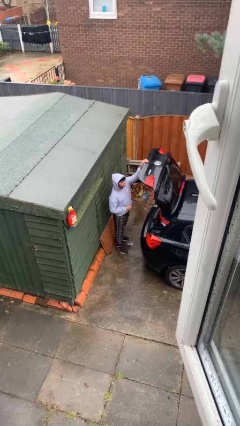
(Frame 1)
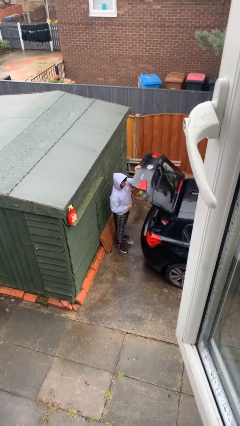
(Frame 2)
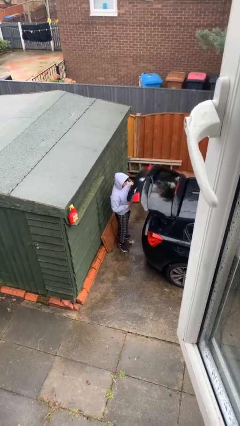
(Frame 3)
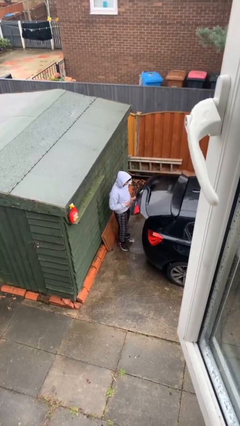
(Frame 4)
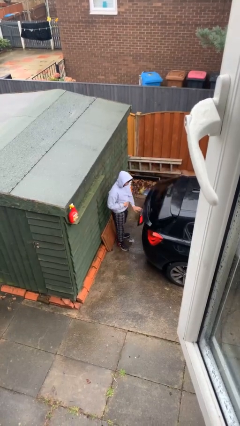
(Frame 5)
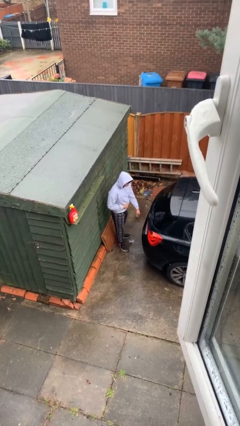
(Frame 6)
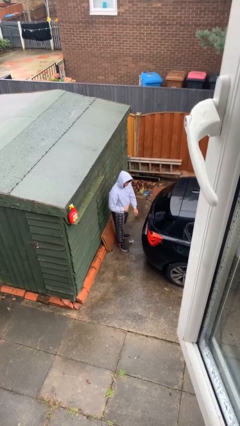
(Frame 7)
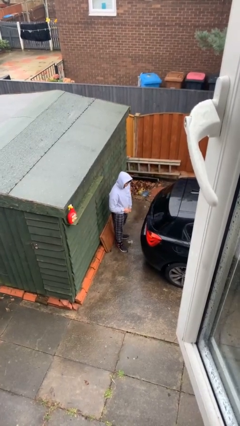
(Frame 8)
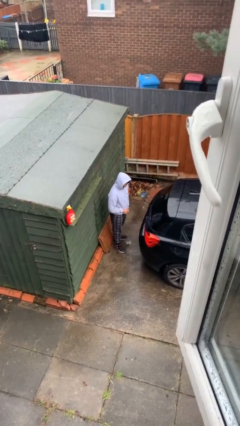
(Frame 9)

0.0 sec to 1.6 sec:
person closes car trunk

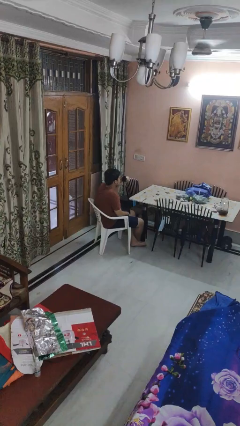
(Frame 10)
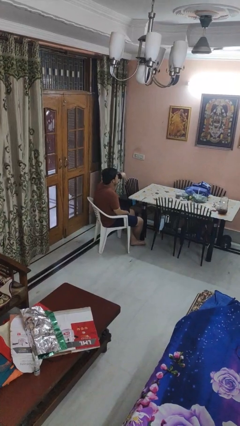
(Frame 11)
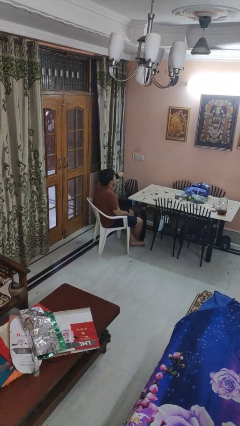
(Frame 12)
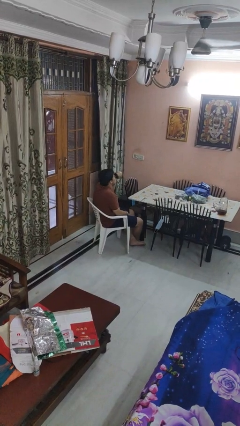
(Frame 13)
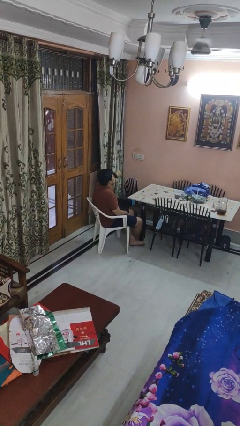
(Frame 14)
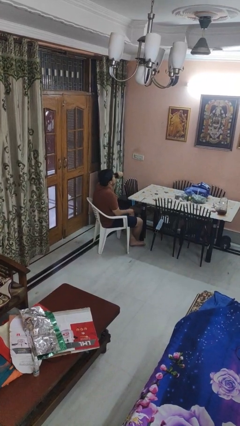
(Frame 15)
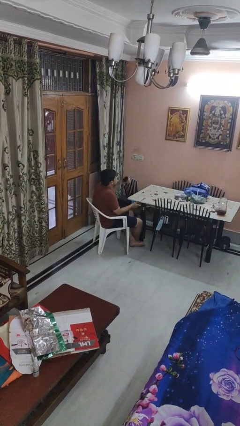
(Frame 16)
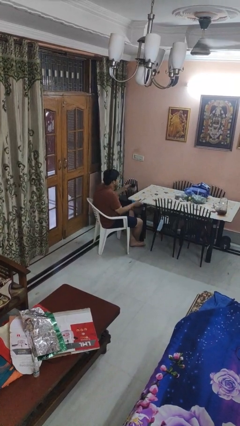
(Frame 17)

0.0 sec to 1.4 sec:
person drinks from mug

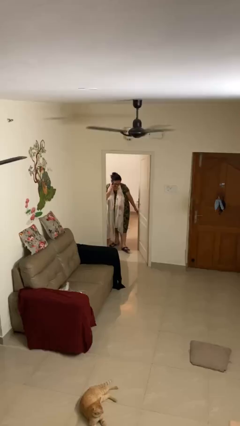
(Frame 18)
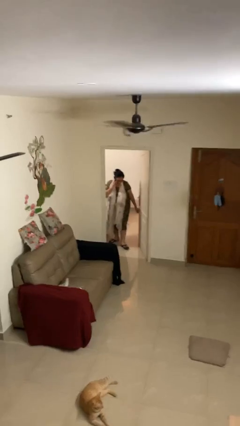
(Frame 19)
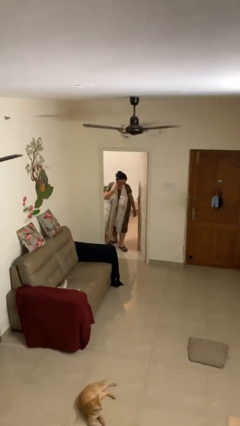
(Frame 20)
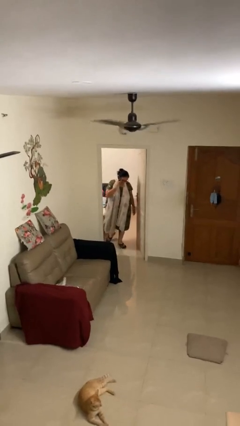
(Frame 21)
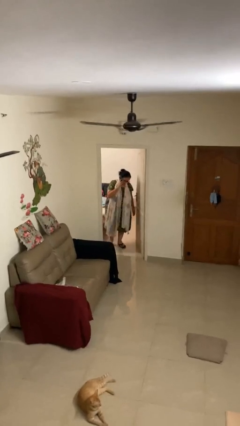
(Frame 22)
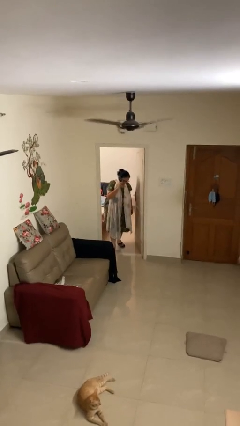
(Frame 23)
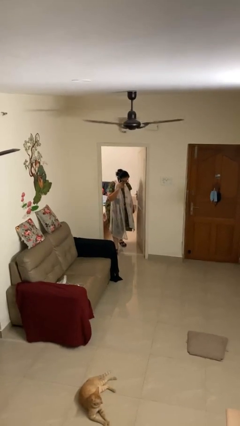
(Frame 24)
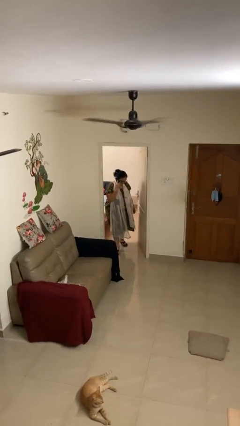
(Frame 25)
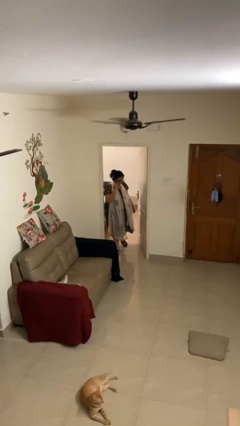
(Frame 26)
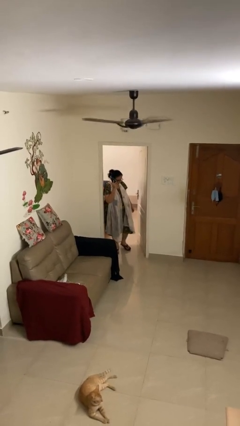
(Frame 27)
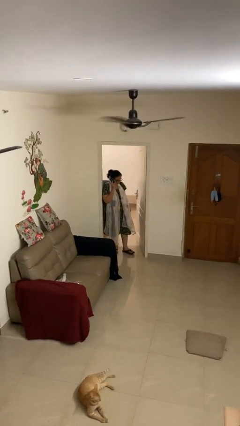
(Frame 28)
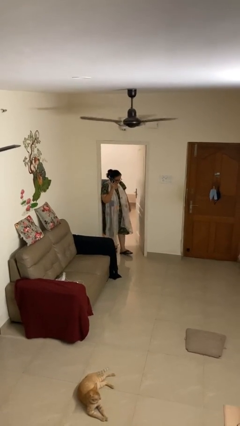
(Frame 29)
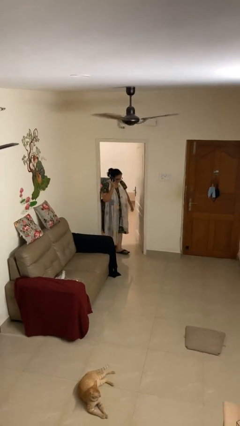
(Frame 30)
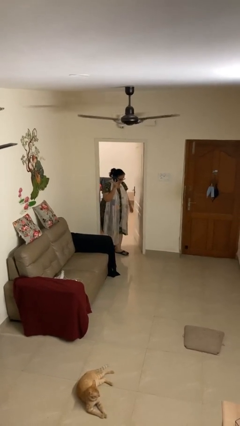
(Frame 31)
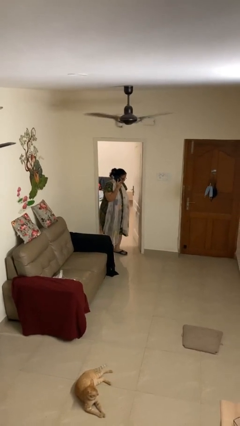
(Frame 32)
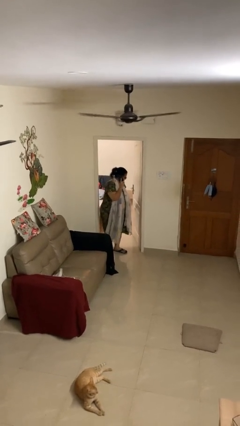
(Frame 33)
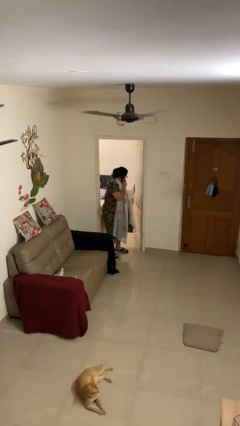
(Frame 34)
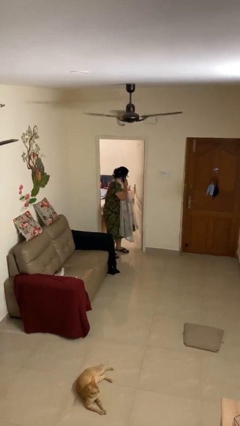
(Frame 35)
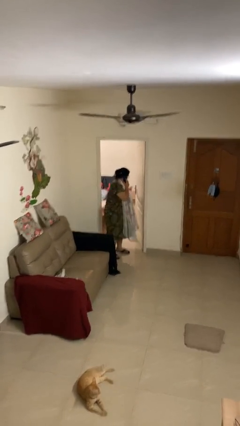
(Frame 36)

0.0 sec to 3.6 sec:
person enters scene through structure

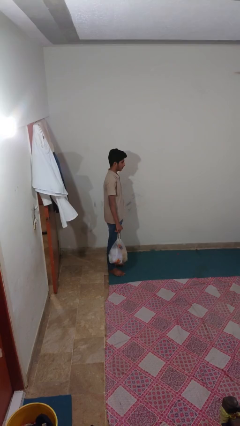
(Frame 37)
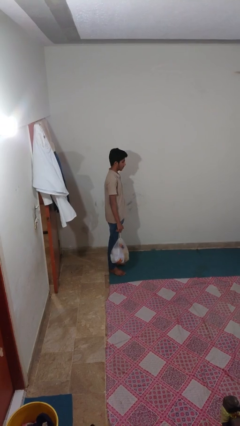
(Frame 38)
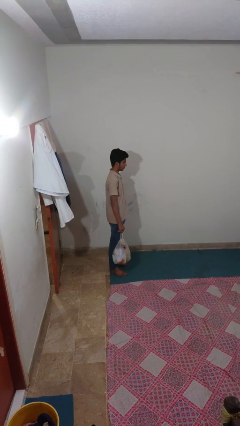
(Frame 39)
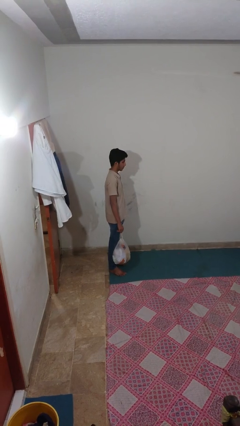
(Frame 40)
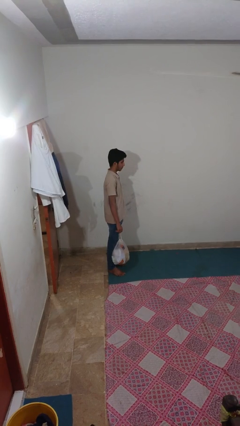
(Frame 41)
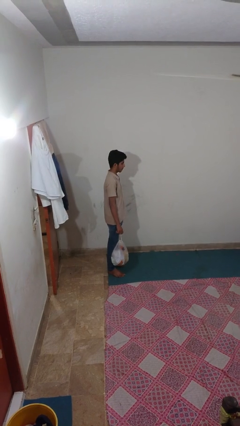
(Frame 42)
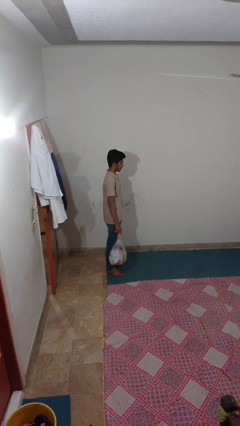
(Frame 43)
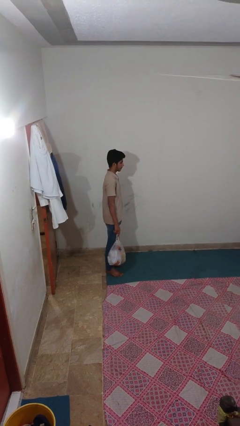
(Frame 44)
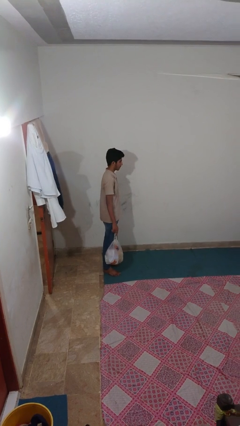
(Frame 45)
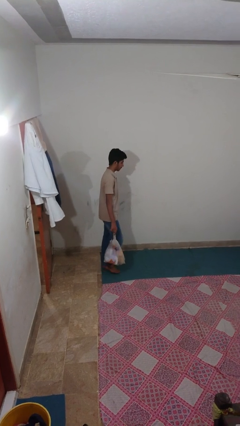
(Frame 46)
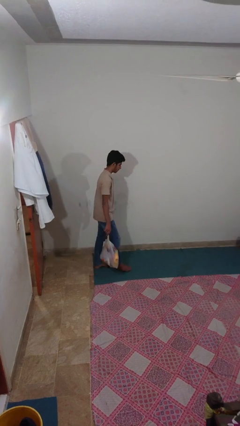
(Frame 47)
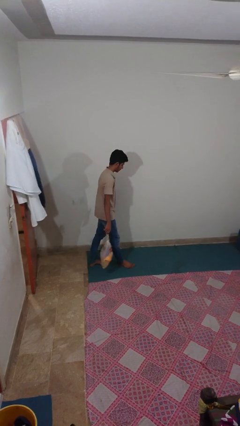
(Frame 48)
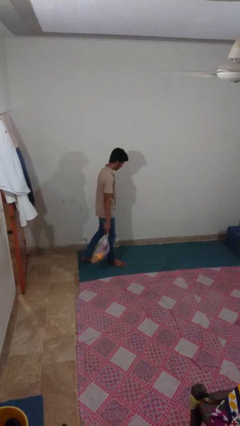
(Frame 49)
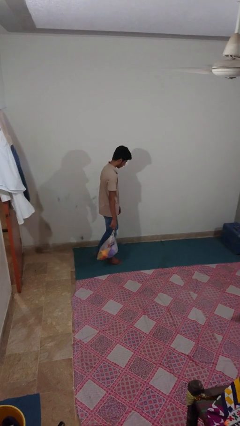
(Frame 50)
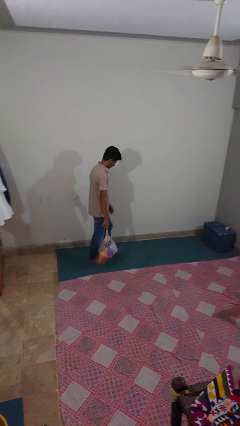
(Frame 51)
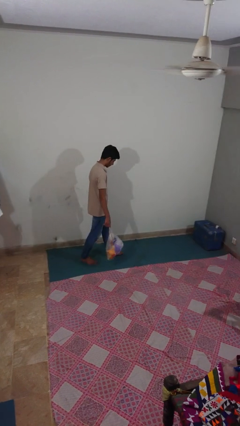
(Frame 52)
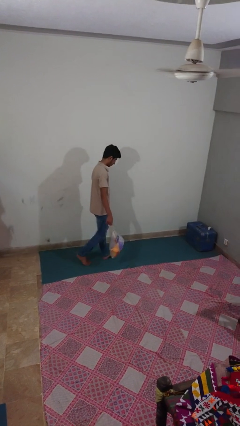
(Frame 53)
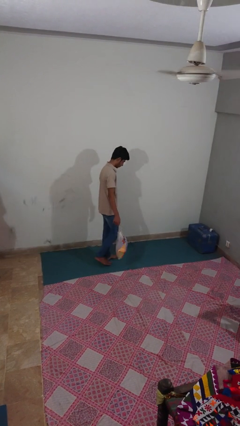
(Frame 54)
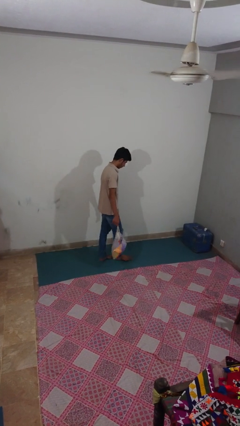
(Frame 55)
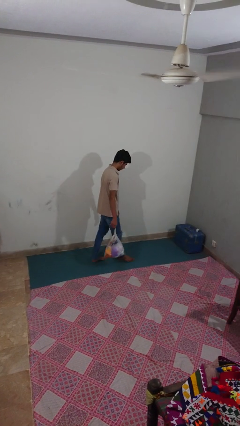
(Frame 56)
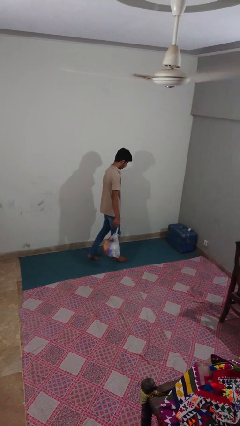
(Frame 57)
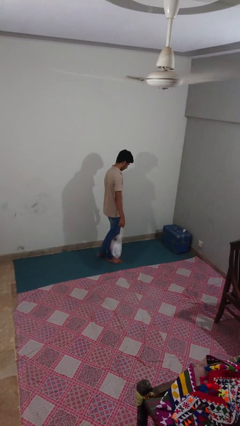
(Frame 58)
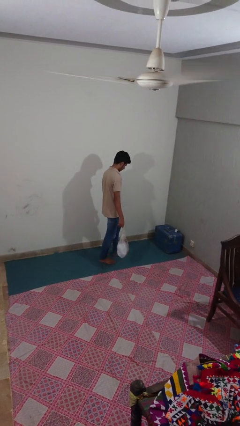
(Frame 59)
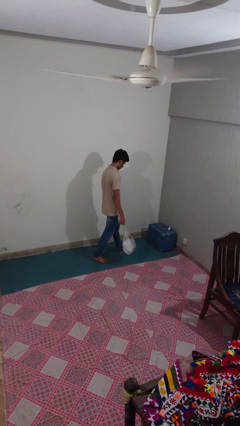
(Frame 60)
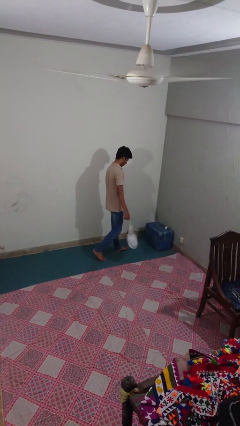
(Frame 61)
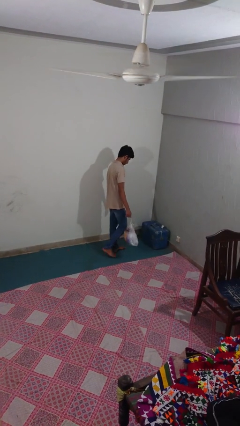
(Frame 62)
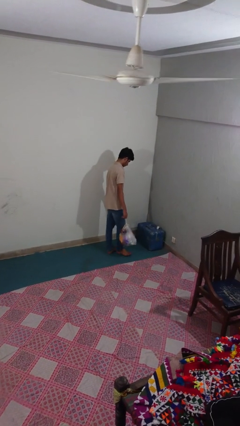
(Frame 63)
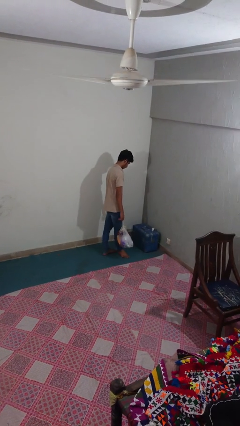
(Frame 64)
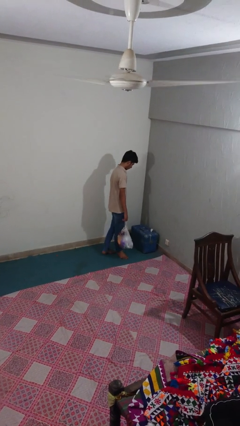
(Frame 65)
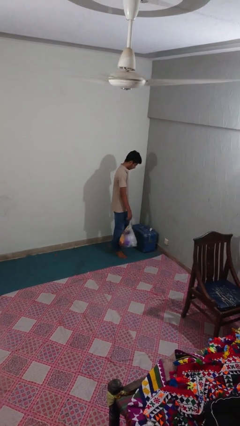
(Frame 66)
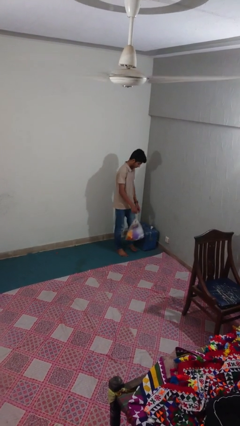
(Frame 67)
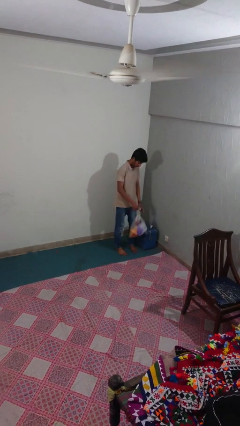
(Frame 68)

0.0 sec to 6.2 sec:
person carries groceries

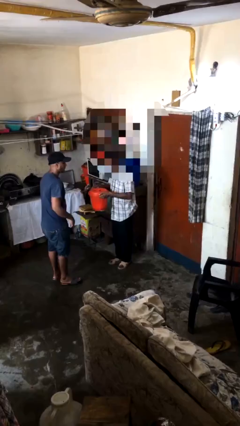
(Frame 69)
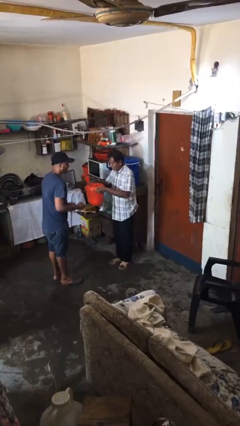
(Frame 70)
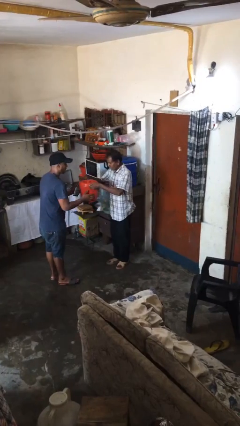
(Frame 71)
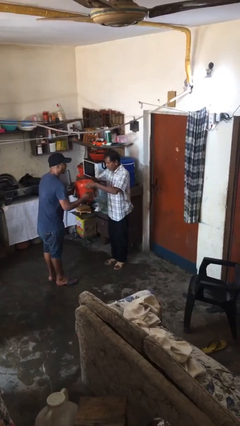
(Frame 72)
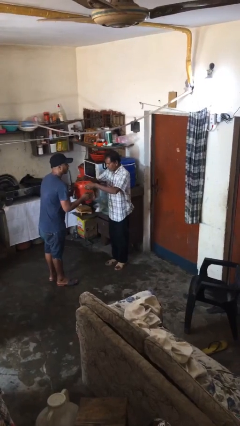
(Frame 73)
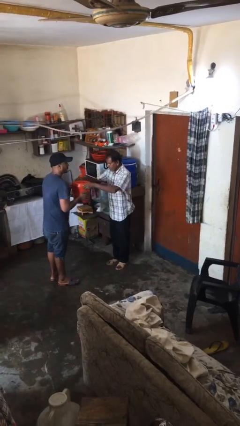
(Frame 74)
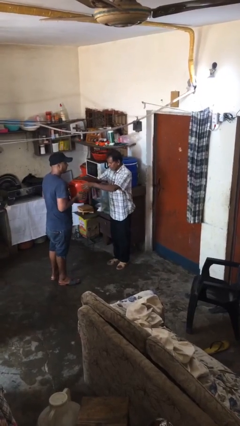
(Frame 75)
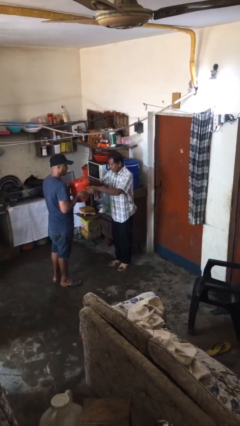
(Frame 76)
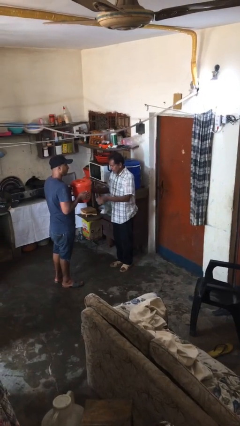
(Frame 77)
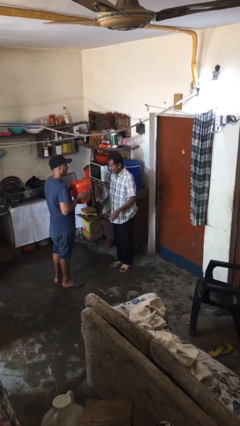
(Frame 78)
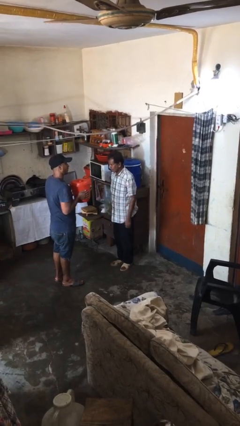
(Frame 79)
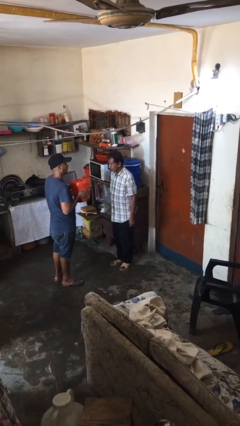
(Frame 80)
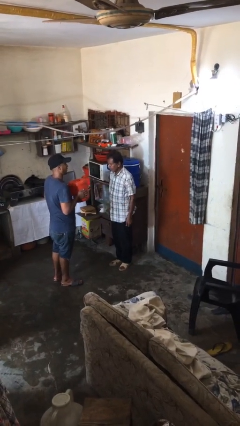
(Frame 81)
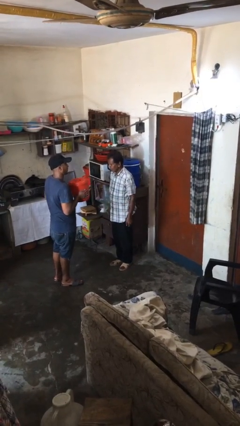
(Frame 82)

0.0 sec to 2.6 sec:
person transfers object to person

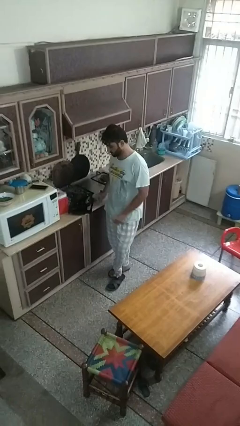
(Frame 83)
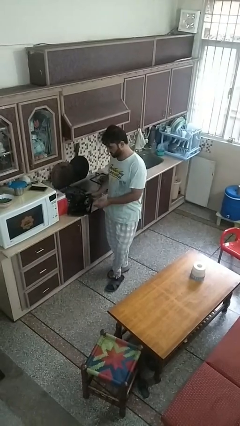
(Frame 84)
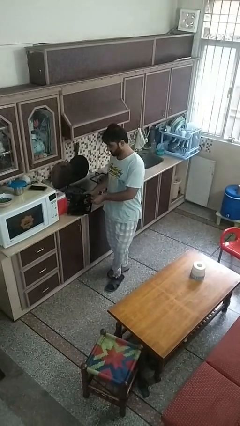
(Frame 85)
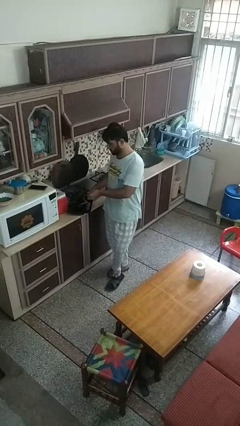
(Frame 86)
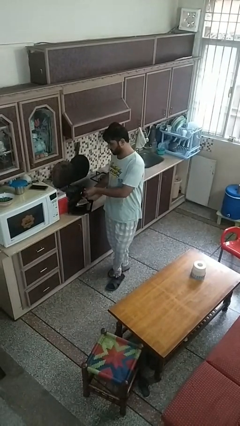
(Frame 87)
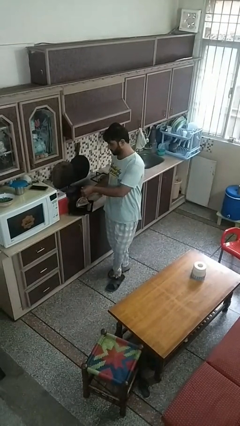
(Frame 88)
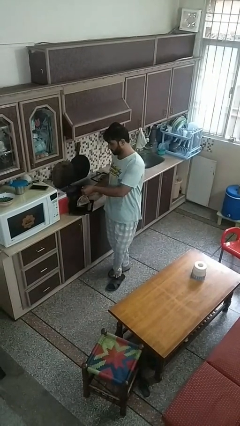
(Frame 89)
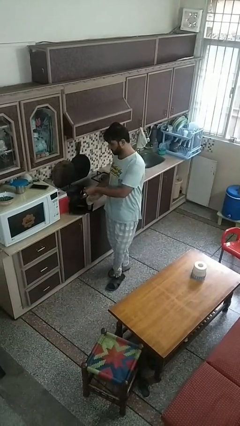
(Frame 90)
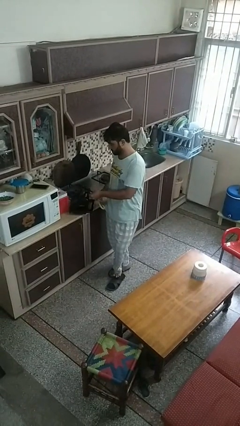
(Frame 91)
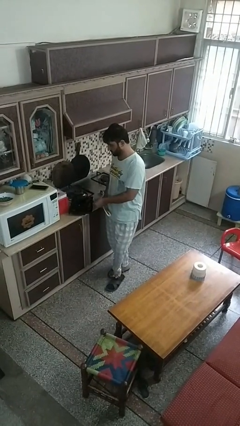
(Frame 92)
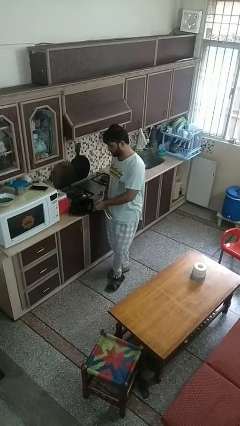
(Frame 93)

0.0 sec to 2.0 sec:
person takes object from toaster

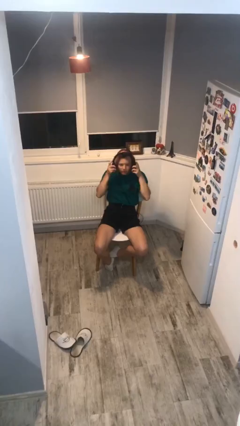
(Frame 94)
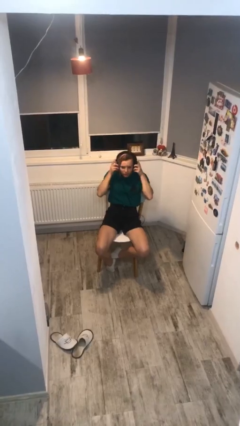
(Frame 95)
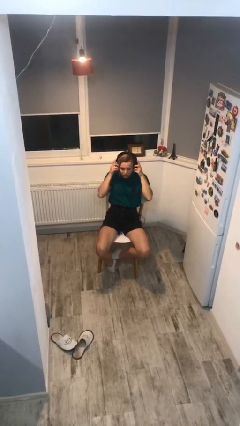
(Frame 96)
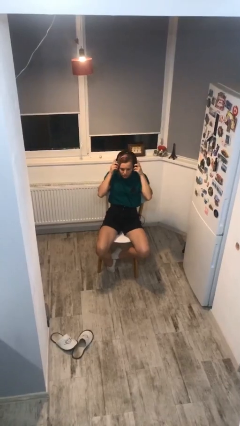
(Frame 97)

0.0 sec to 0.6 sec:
person puts on headphones
